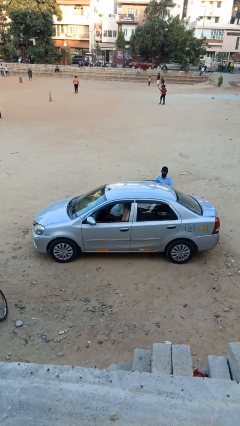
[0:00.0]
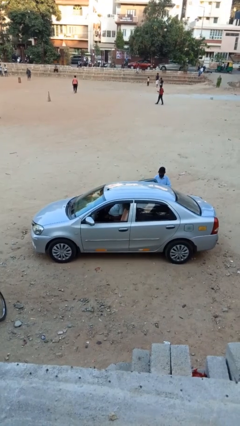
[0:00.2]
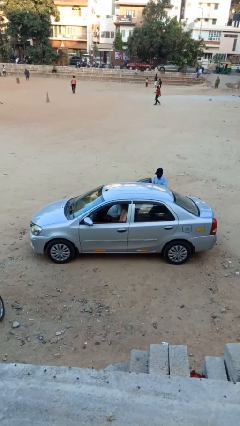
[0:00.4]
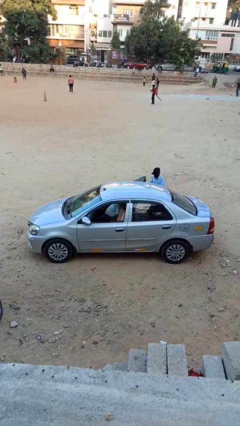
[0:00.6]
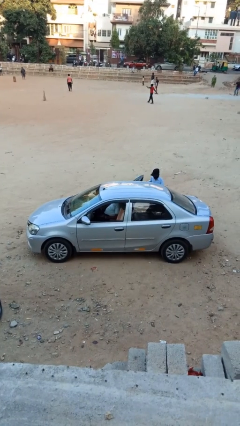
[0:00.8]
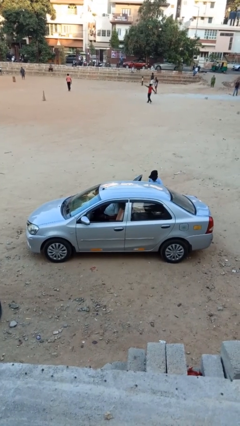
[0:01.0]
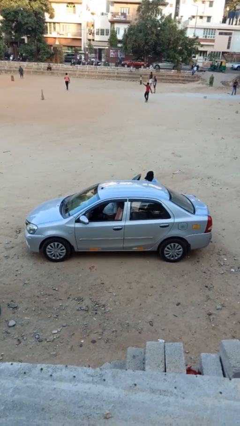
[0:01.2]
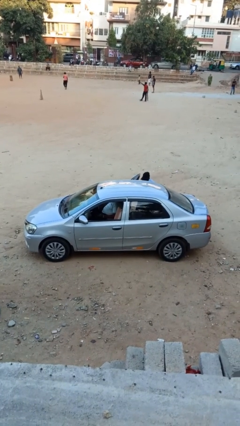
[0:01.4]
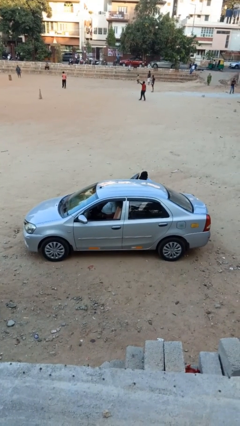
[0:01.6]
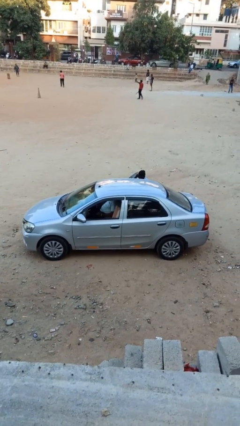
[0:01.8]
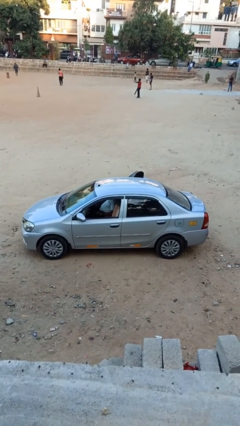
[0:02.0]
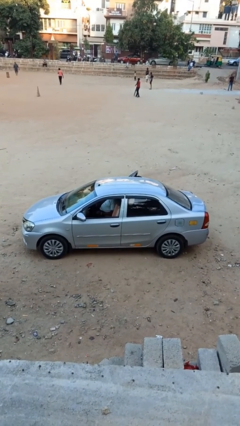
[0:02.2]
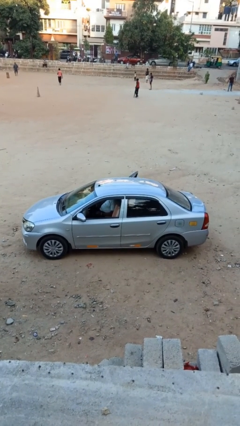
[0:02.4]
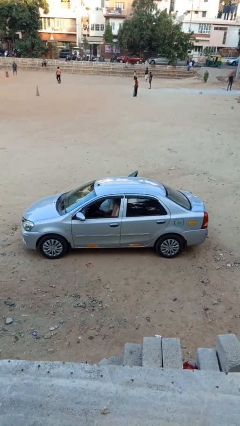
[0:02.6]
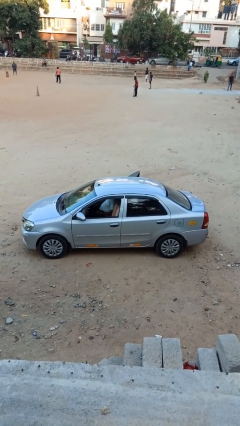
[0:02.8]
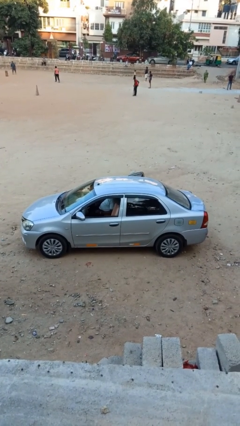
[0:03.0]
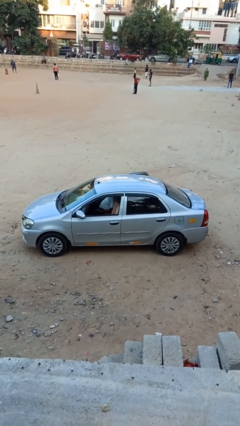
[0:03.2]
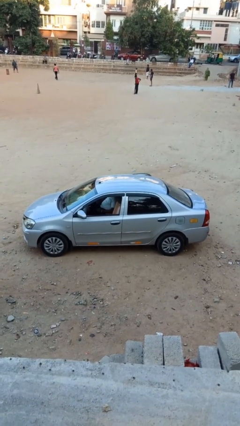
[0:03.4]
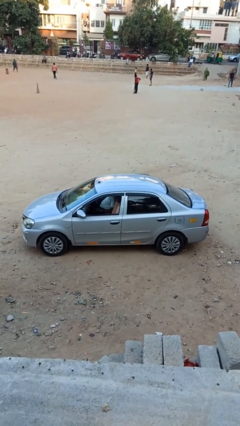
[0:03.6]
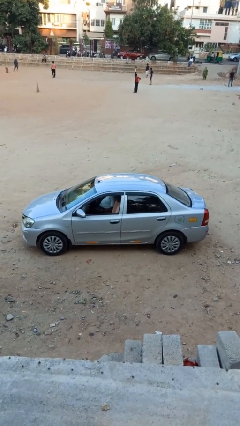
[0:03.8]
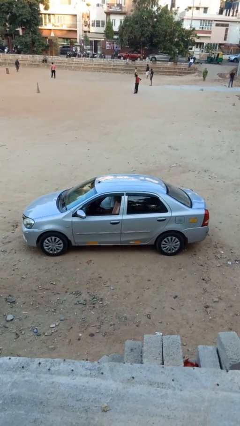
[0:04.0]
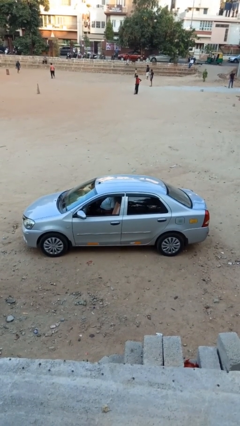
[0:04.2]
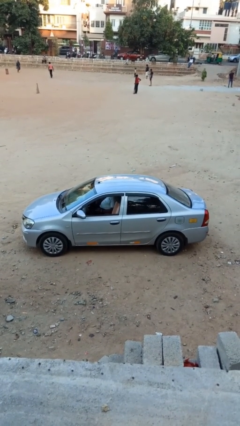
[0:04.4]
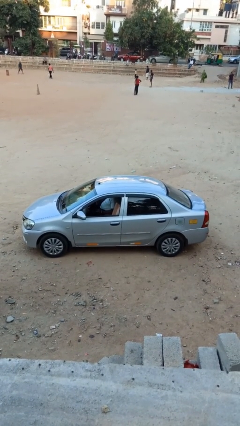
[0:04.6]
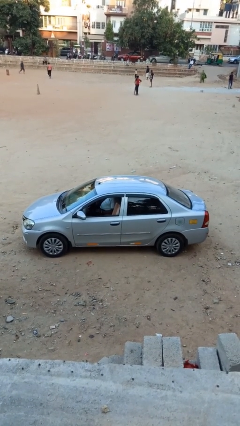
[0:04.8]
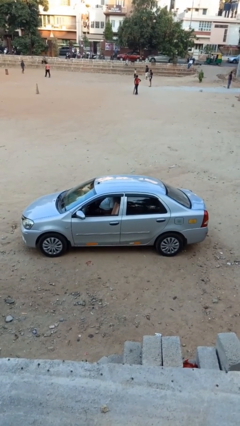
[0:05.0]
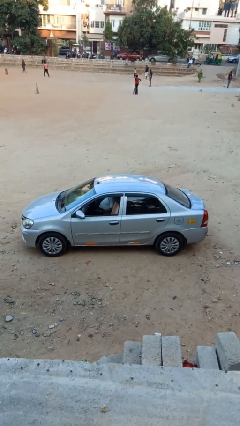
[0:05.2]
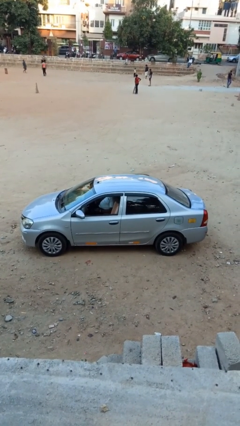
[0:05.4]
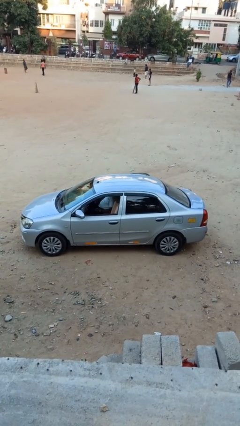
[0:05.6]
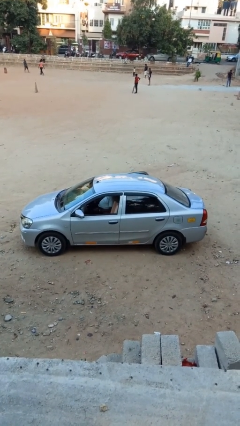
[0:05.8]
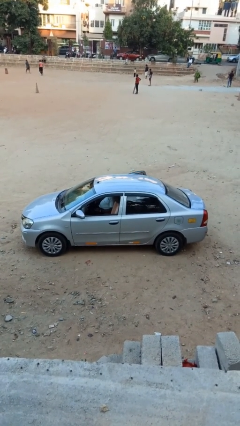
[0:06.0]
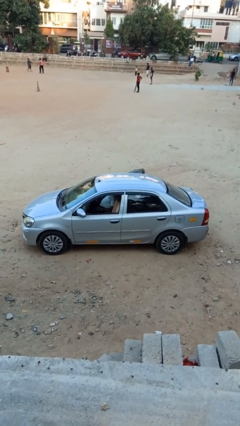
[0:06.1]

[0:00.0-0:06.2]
car picks up person

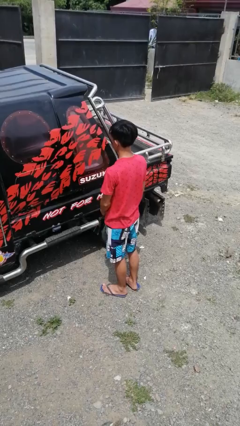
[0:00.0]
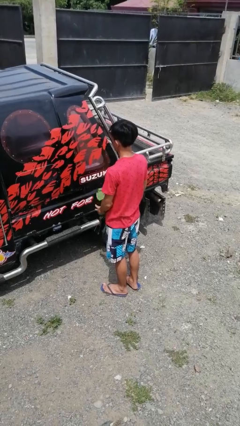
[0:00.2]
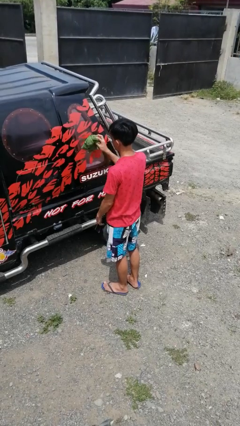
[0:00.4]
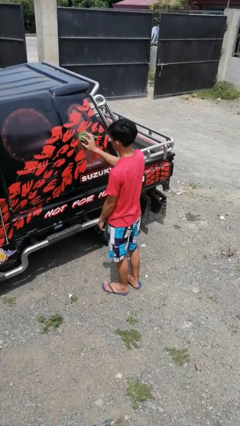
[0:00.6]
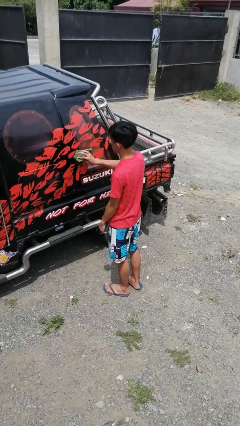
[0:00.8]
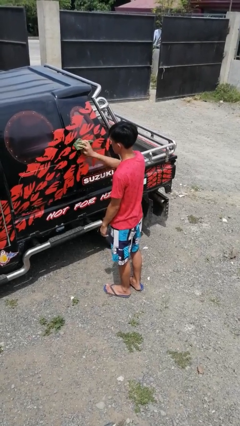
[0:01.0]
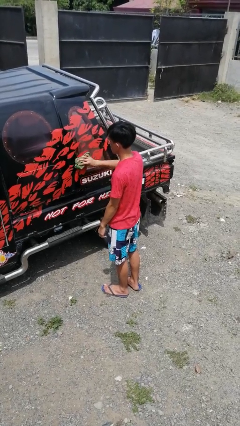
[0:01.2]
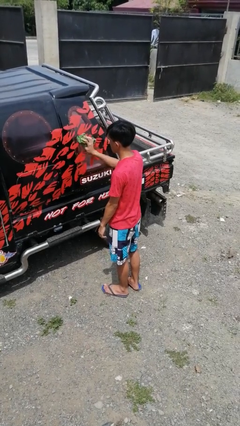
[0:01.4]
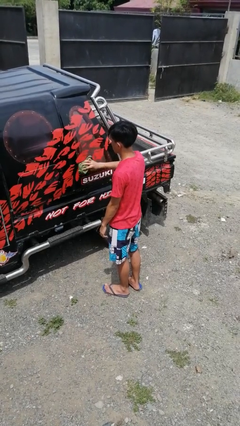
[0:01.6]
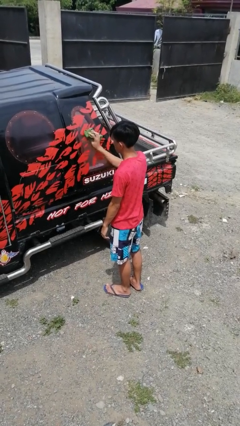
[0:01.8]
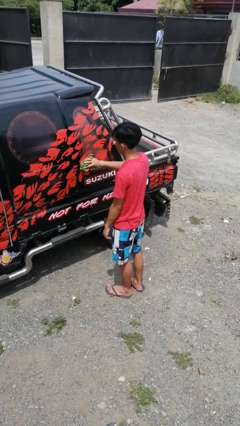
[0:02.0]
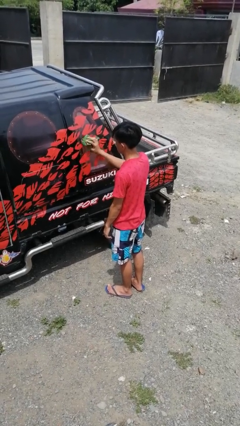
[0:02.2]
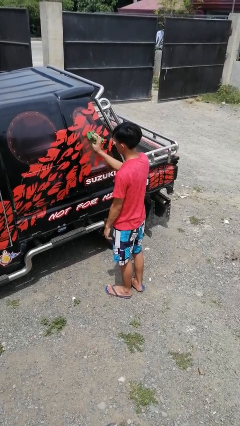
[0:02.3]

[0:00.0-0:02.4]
person polishes car with rag

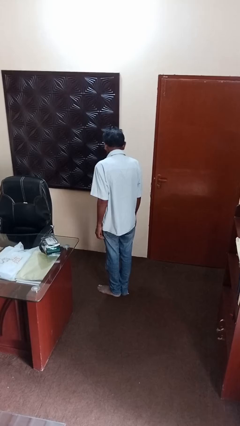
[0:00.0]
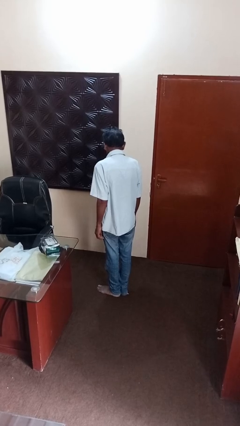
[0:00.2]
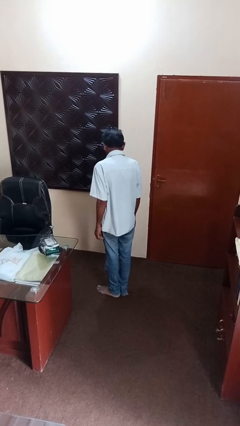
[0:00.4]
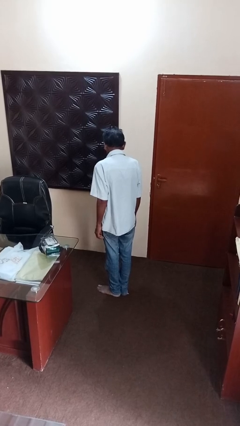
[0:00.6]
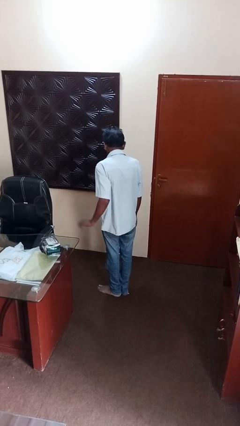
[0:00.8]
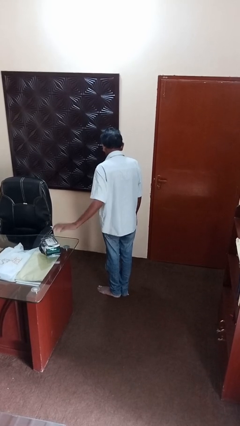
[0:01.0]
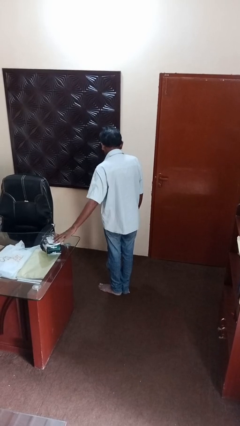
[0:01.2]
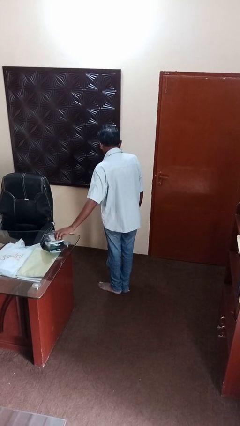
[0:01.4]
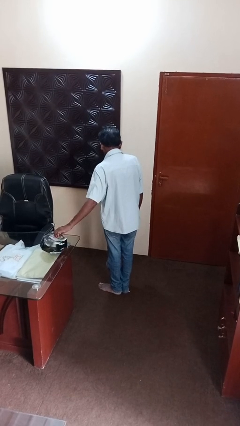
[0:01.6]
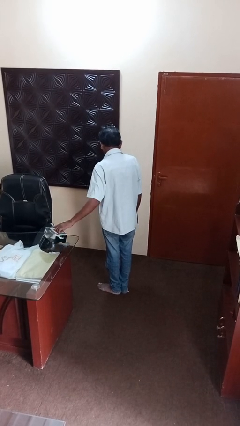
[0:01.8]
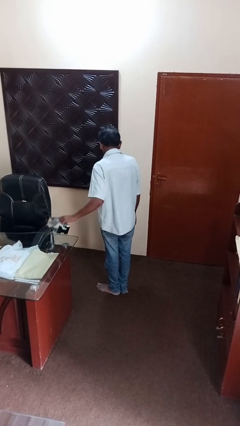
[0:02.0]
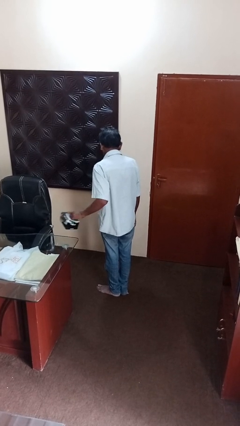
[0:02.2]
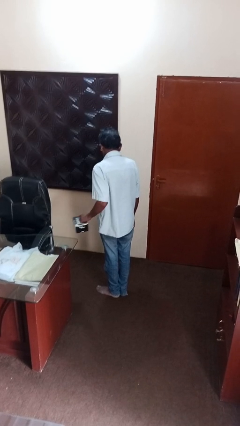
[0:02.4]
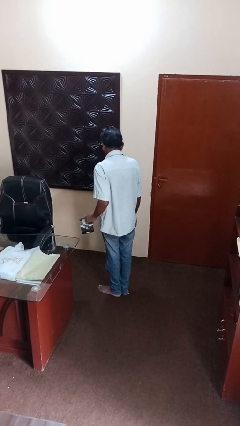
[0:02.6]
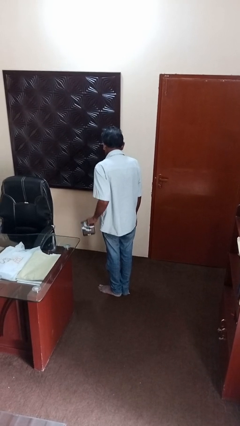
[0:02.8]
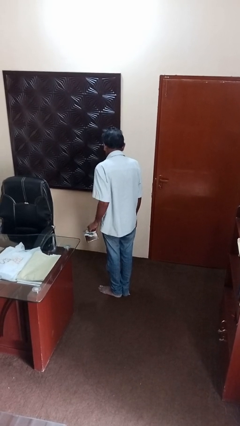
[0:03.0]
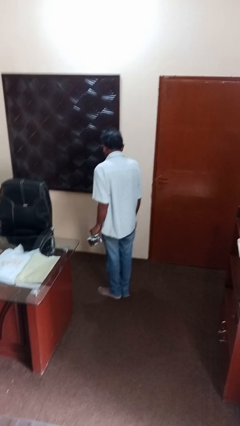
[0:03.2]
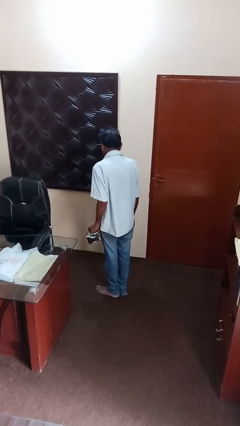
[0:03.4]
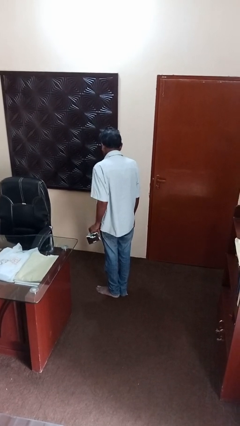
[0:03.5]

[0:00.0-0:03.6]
person picks up object from table

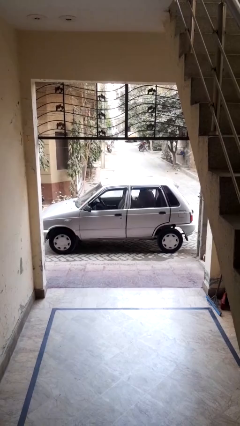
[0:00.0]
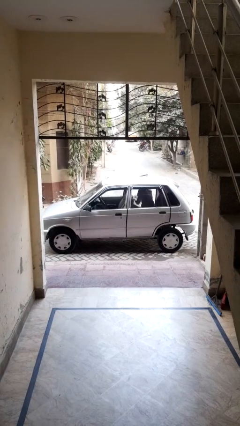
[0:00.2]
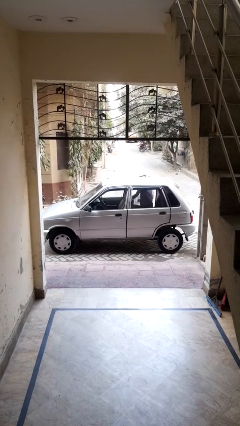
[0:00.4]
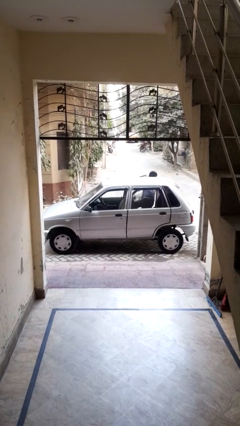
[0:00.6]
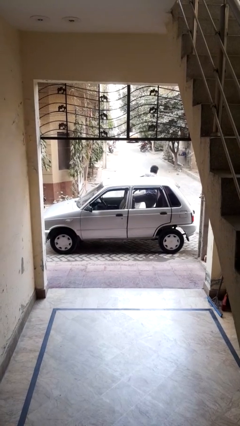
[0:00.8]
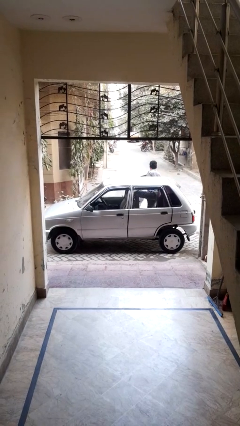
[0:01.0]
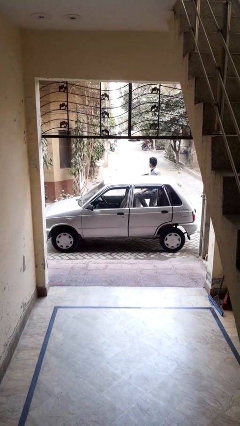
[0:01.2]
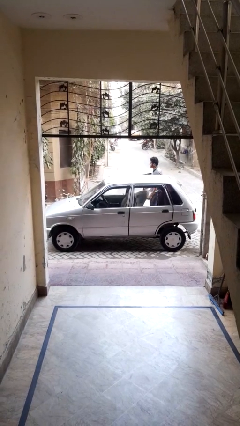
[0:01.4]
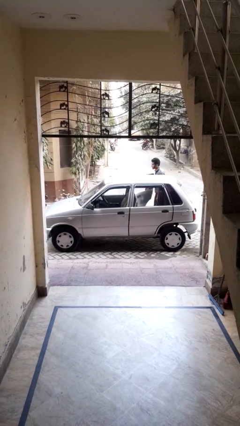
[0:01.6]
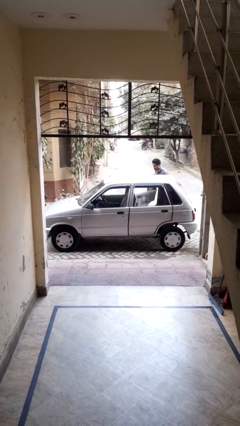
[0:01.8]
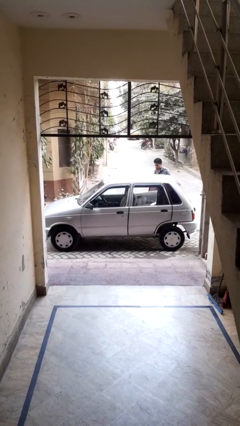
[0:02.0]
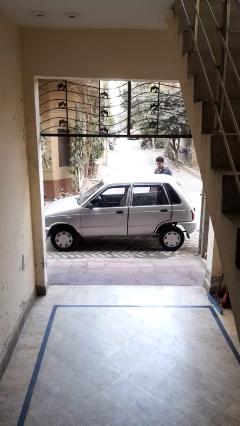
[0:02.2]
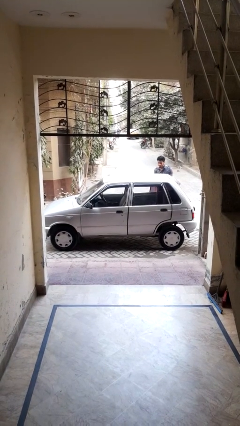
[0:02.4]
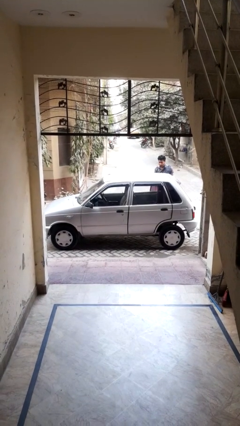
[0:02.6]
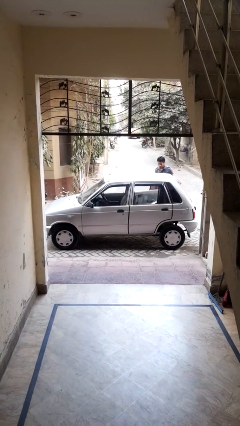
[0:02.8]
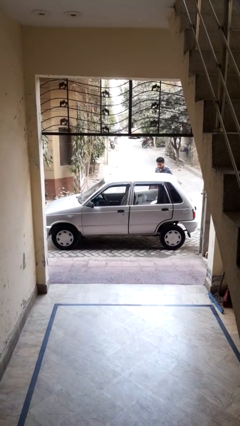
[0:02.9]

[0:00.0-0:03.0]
car drops off person

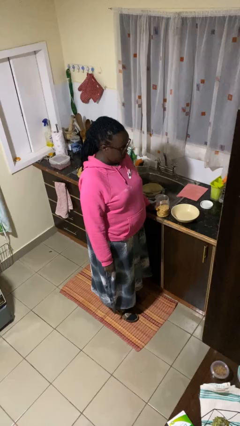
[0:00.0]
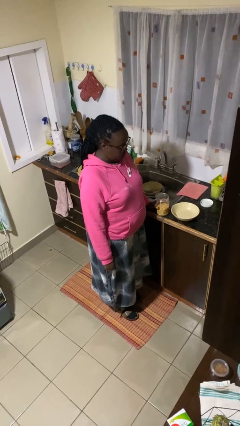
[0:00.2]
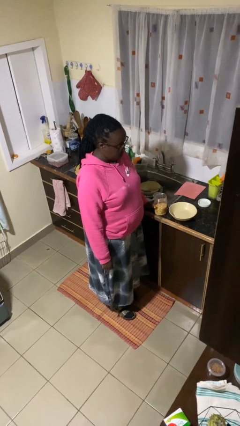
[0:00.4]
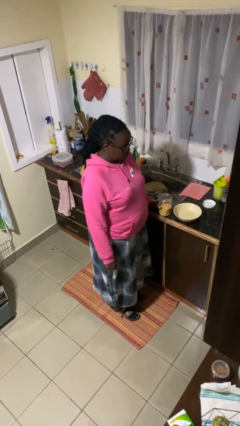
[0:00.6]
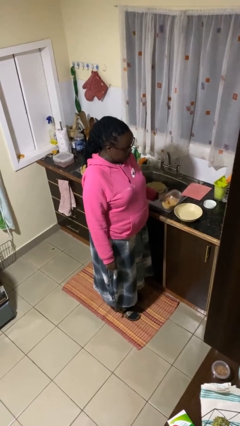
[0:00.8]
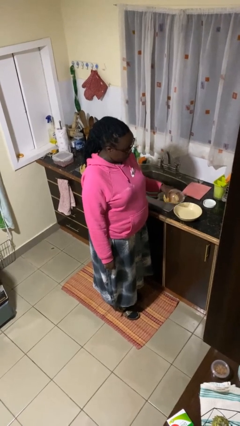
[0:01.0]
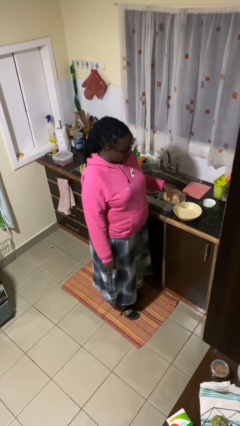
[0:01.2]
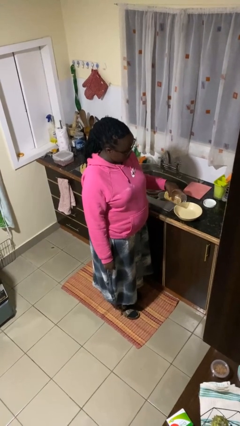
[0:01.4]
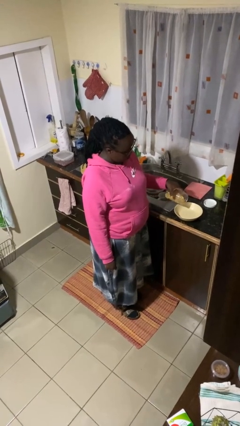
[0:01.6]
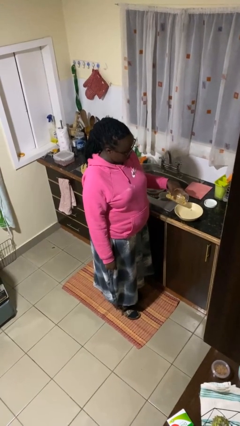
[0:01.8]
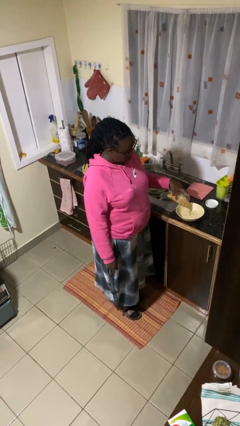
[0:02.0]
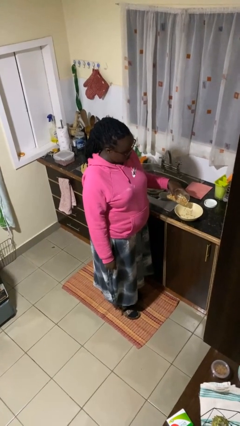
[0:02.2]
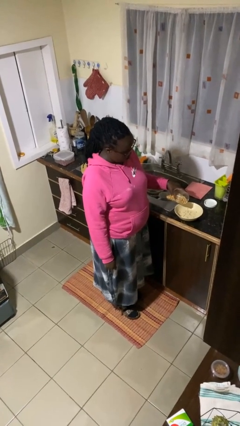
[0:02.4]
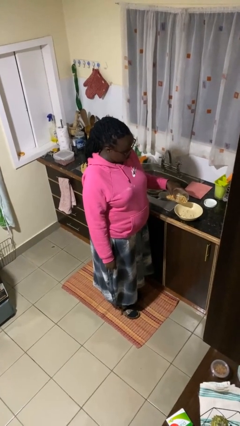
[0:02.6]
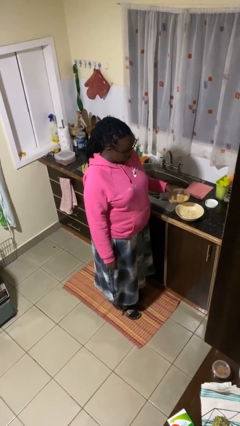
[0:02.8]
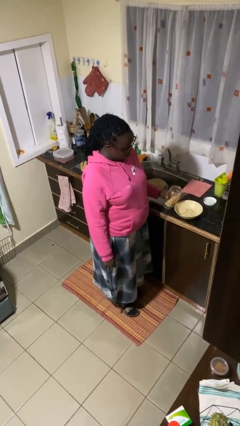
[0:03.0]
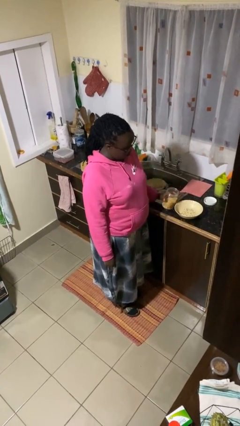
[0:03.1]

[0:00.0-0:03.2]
person pours into bowl
